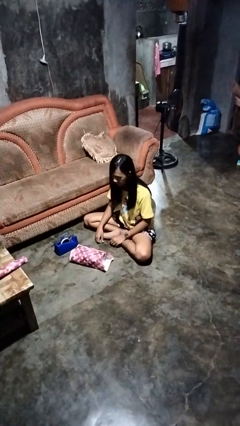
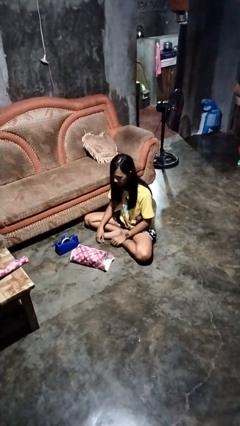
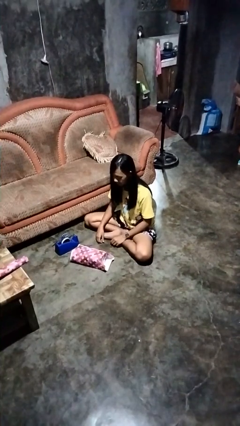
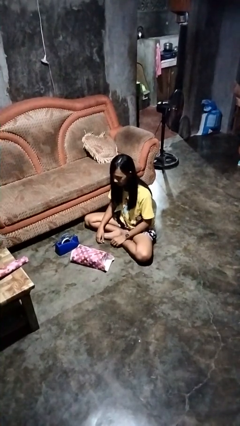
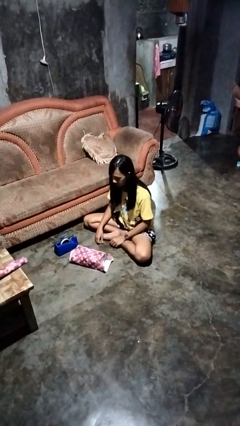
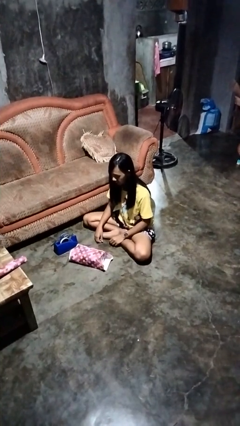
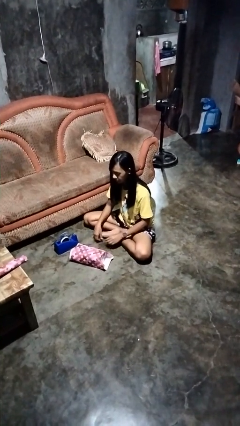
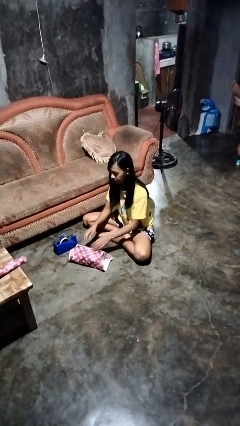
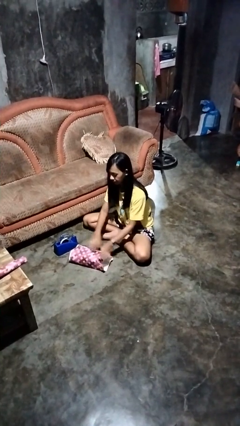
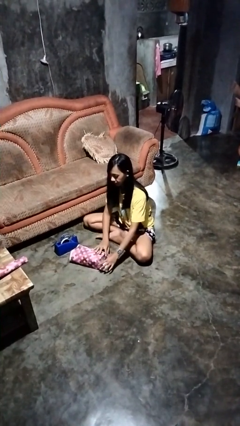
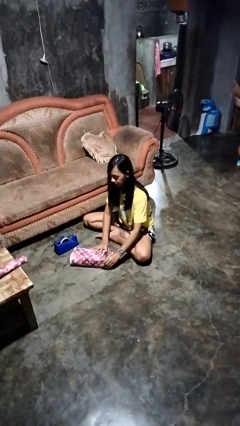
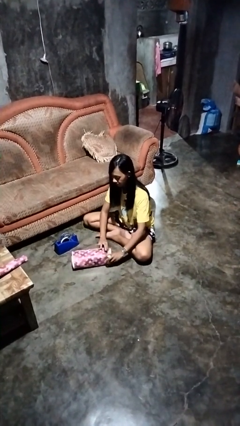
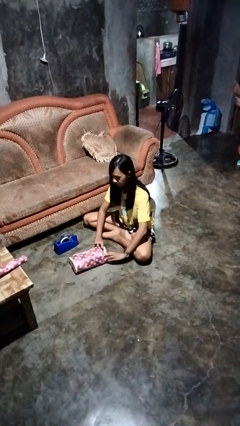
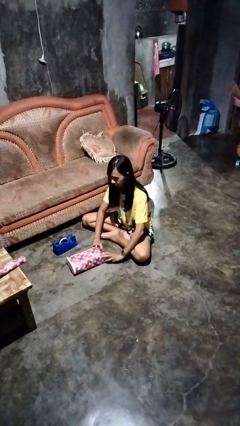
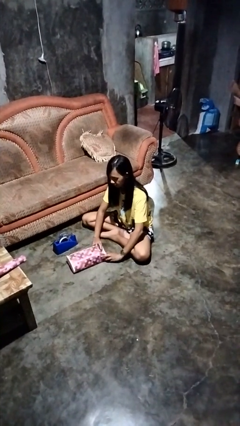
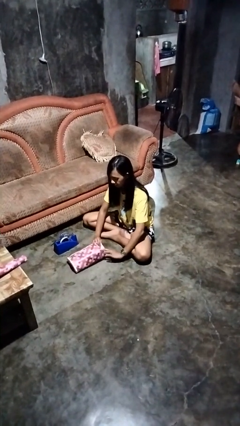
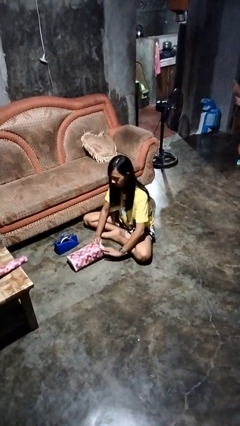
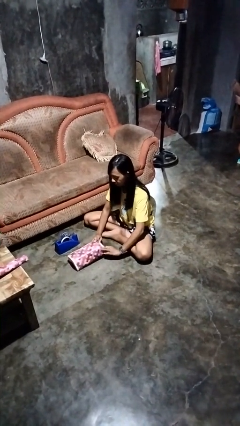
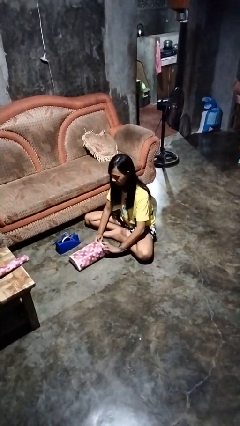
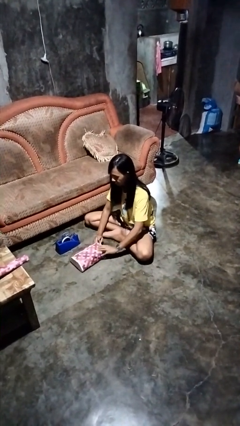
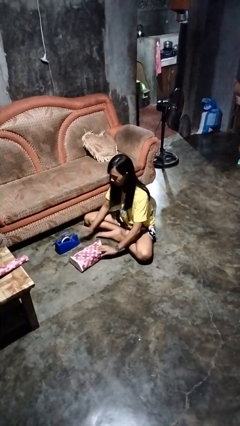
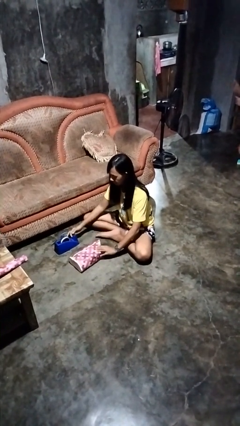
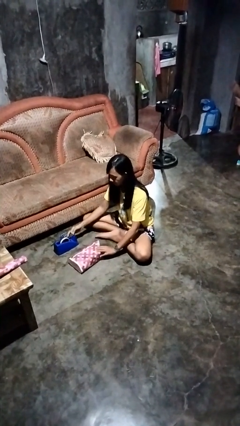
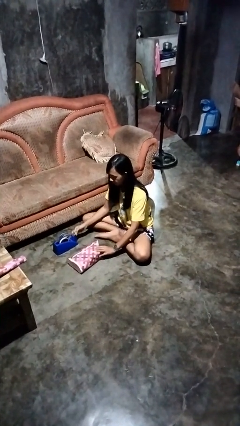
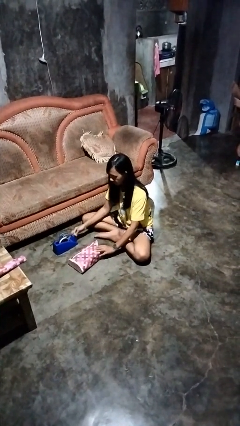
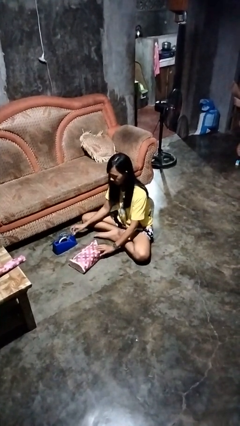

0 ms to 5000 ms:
person wraps box

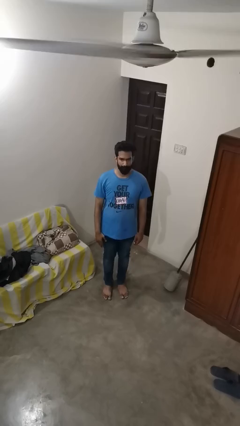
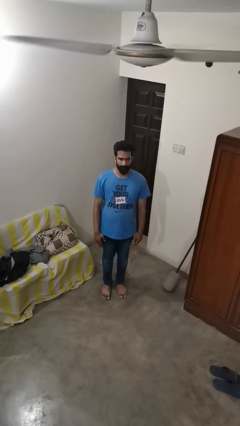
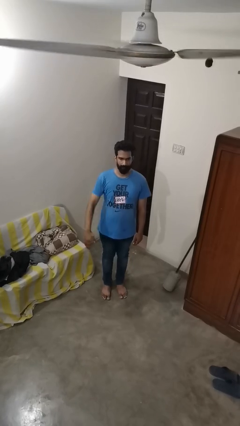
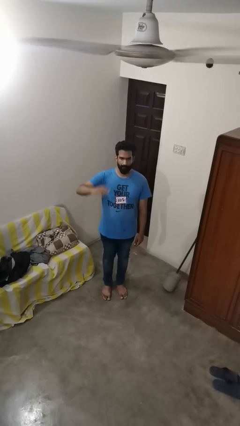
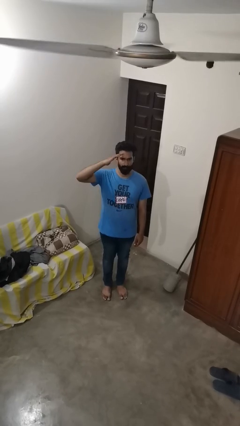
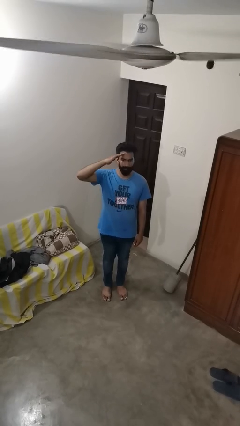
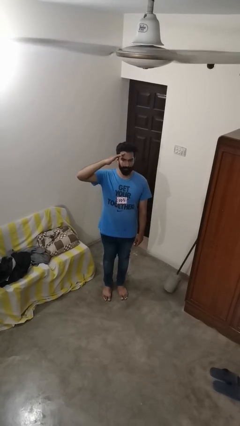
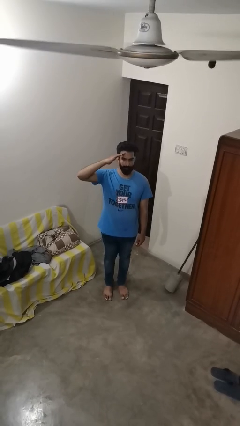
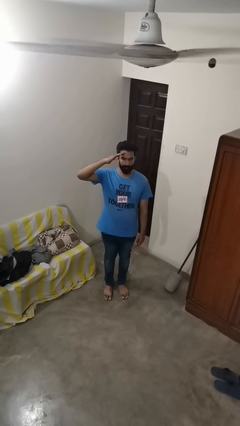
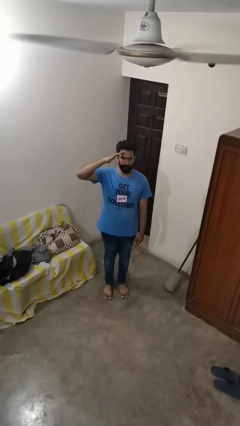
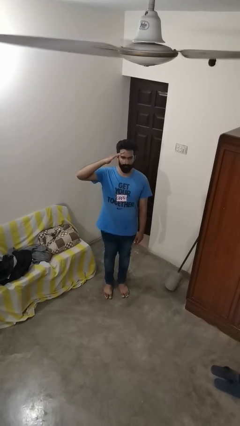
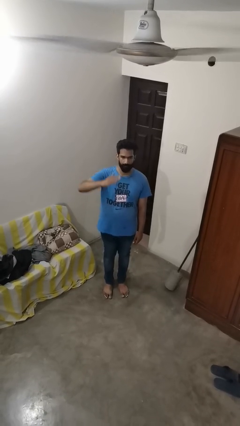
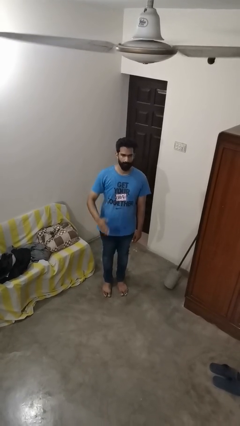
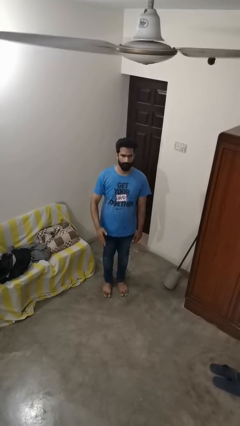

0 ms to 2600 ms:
person salutes

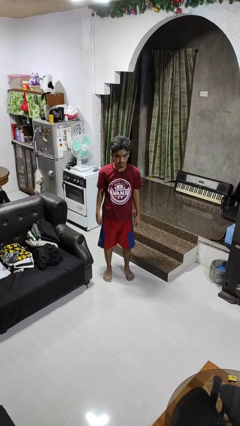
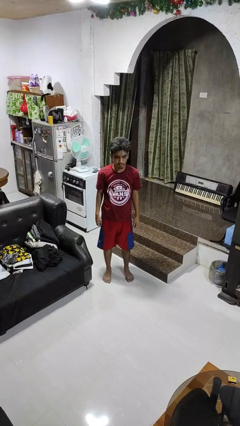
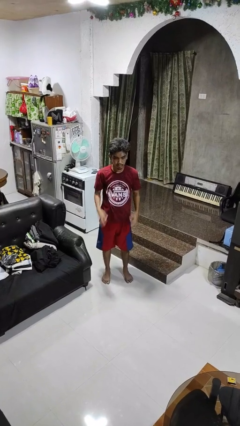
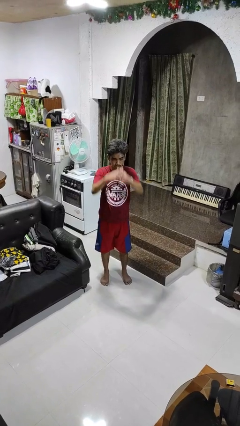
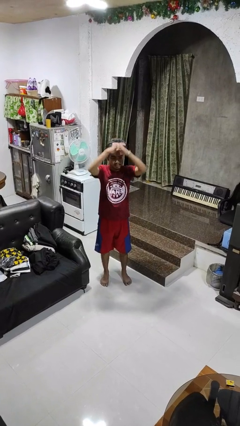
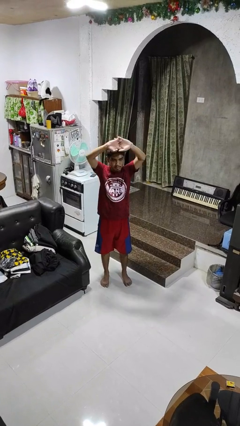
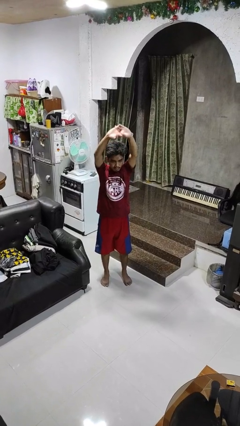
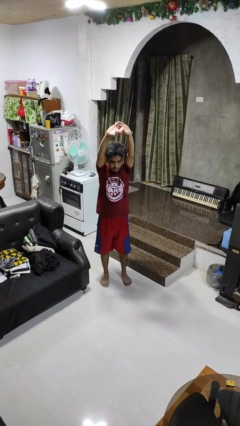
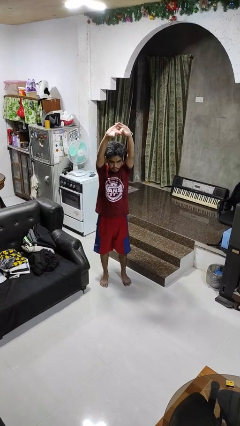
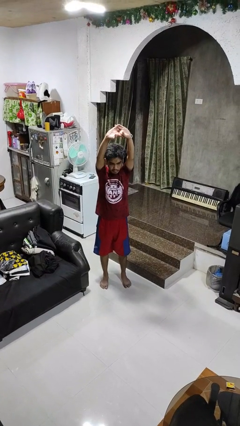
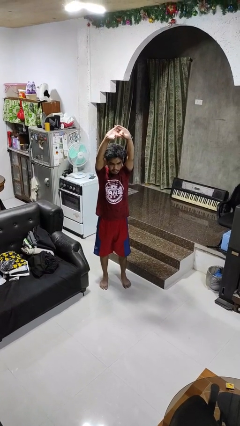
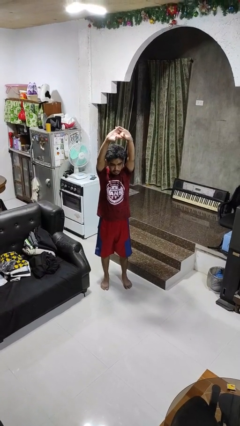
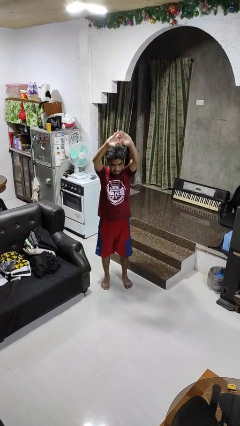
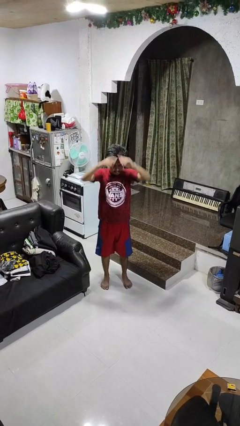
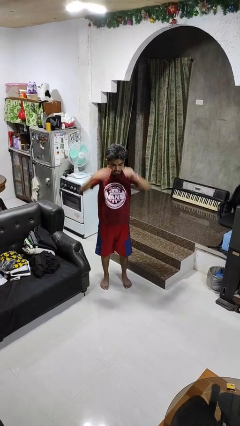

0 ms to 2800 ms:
person stretches arms over head

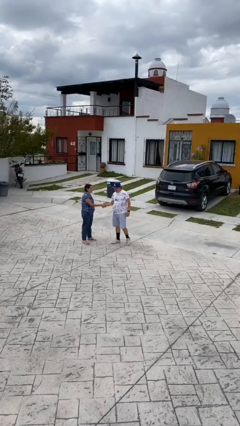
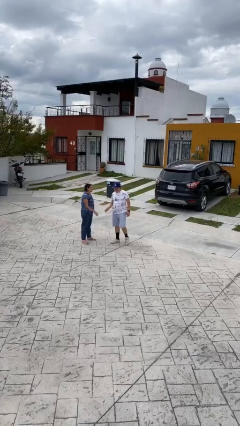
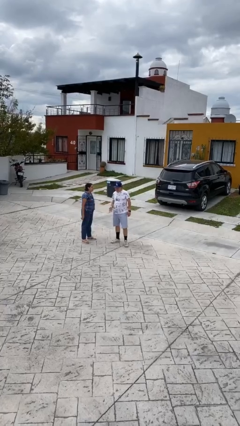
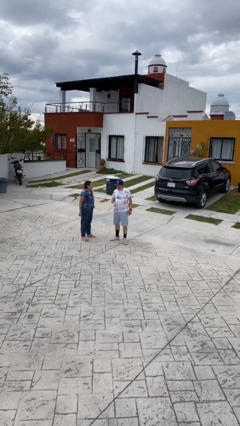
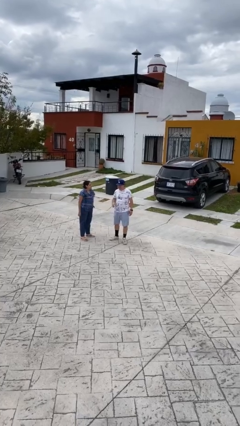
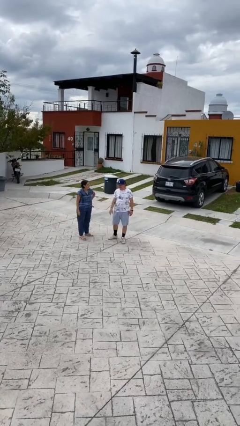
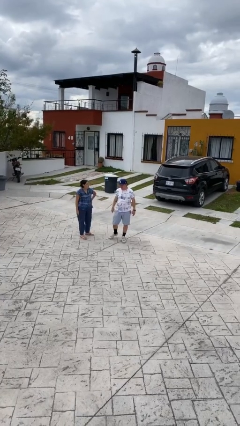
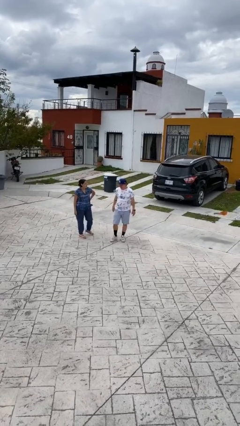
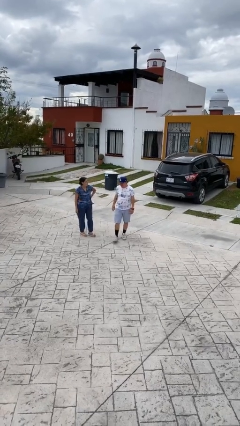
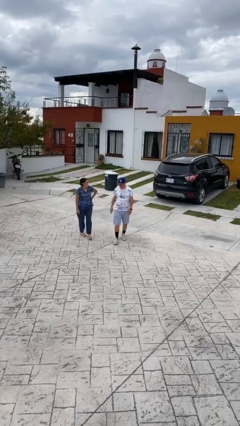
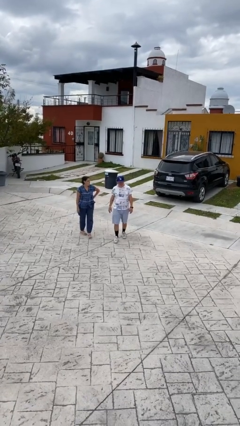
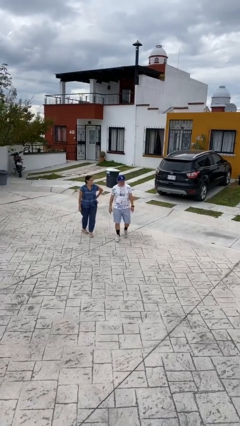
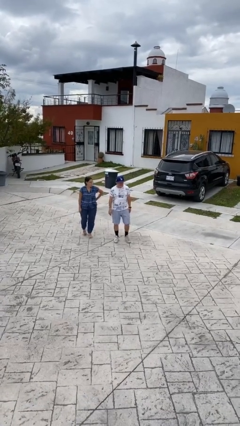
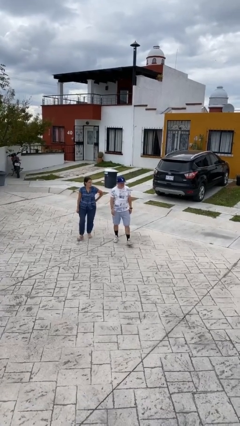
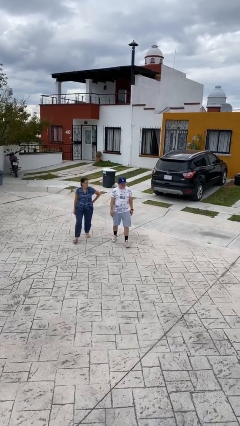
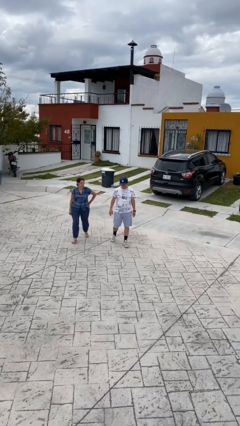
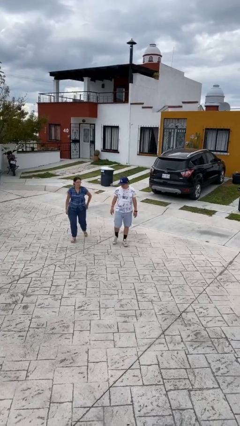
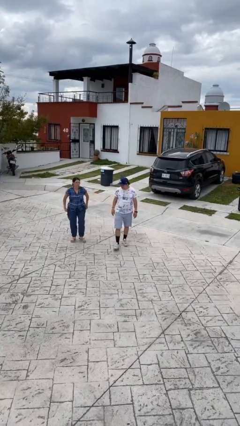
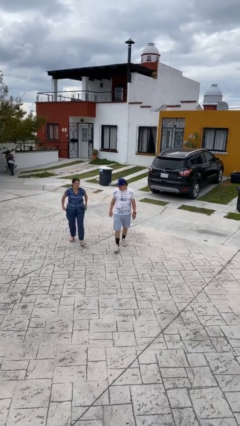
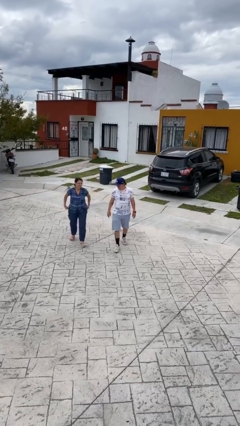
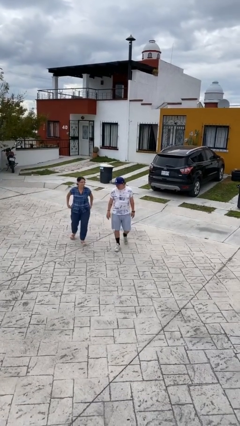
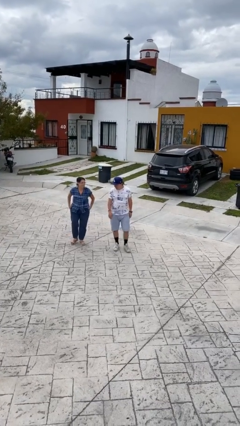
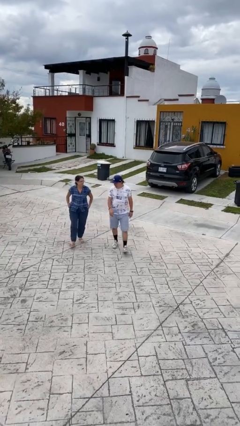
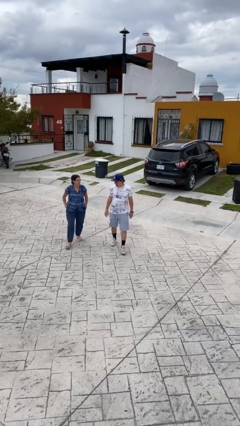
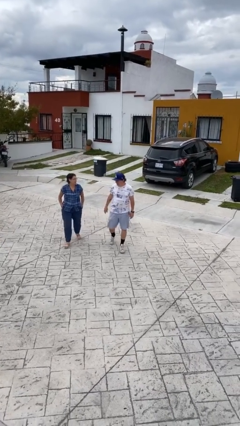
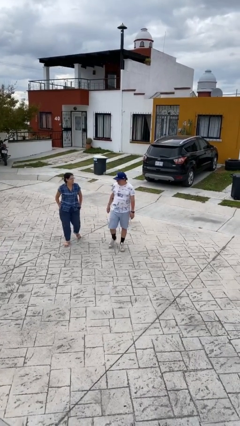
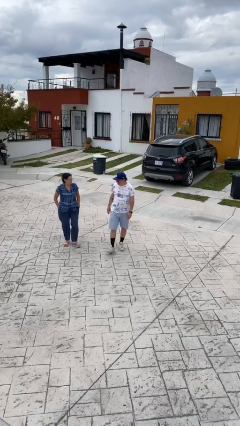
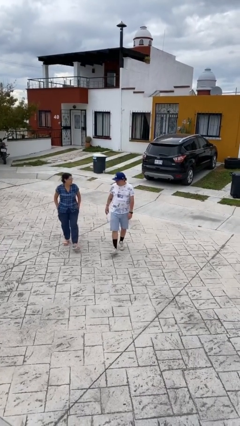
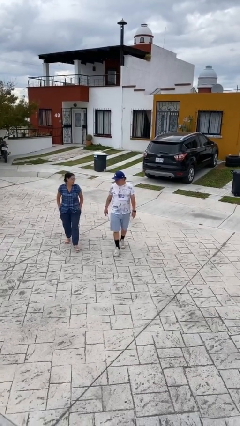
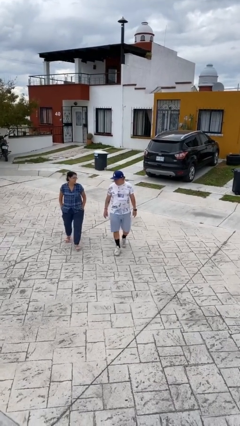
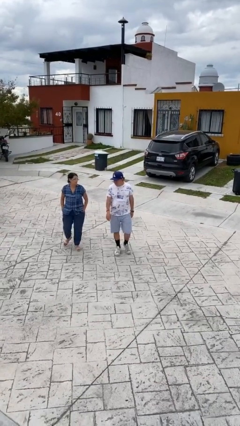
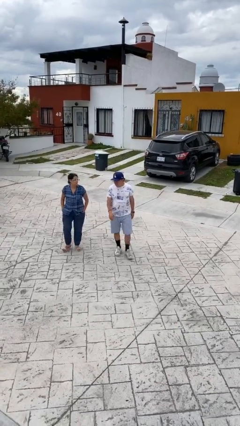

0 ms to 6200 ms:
person talks to person

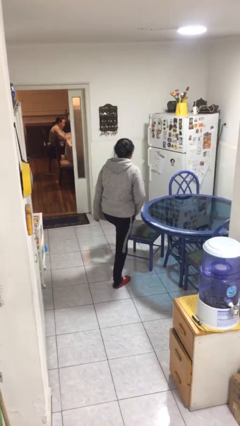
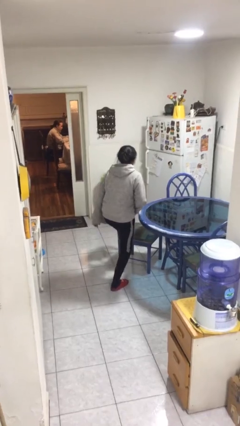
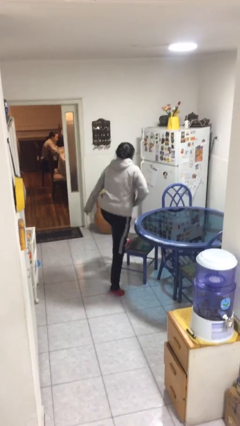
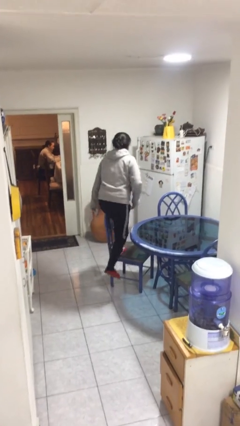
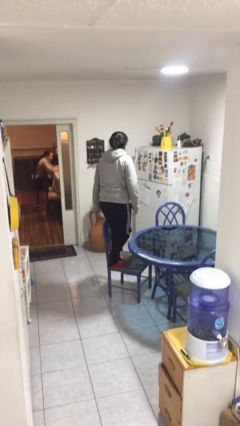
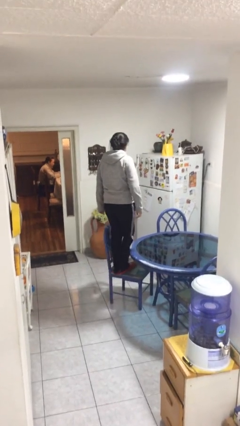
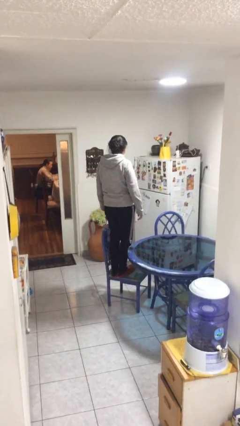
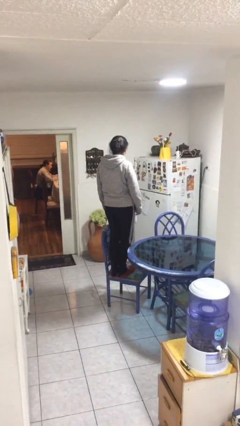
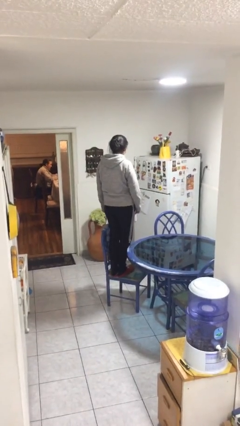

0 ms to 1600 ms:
person climbs on chair
